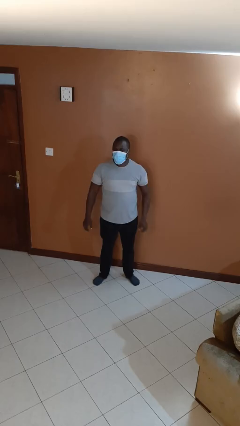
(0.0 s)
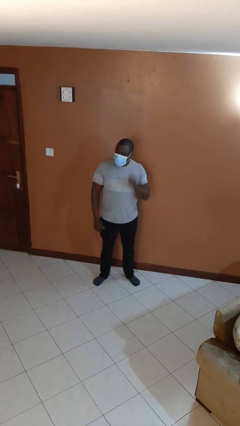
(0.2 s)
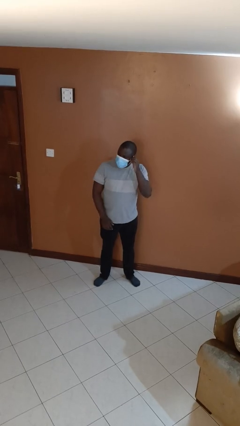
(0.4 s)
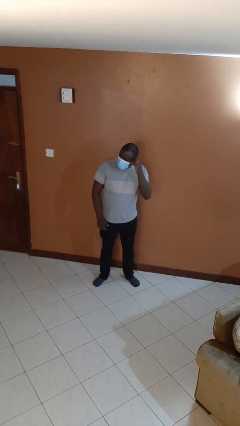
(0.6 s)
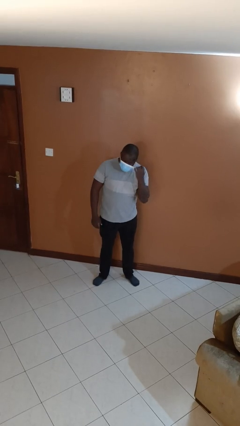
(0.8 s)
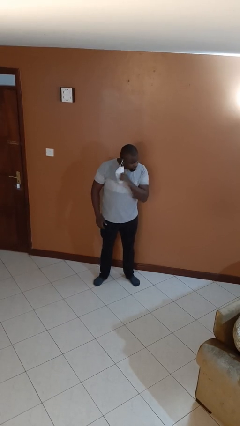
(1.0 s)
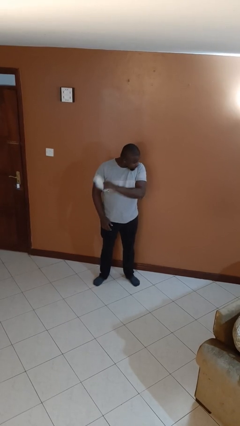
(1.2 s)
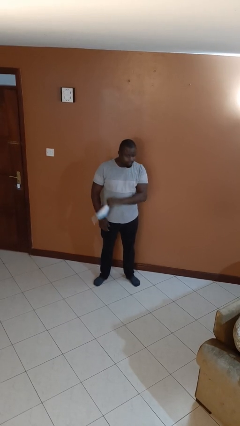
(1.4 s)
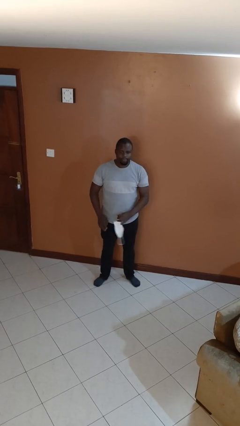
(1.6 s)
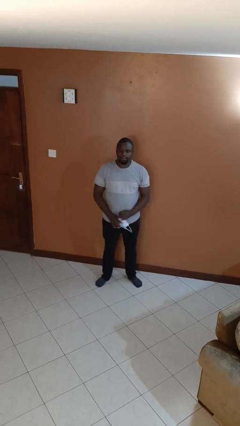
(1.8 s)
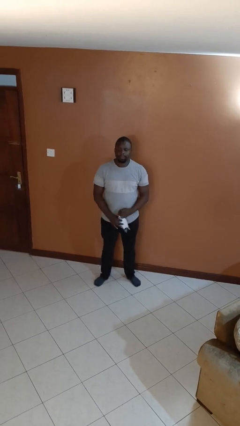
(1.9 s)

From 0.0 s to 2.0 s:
person takes off facemask

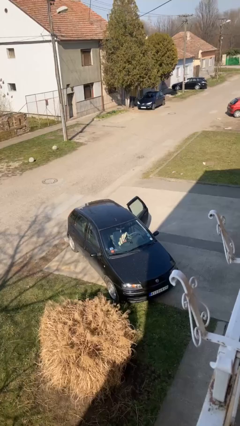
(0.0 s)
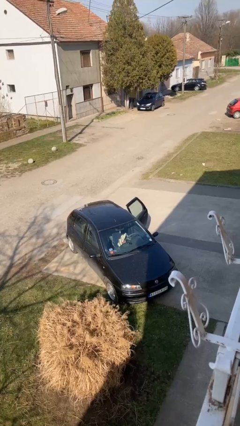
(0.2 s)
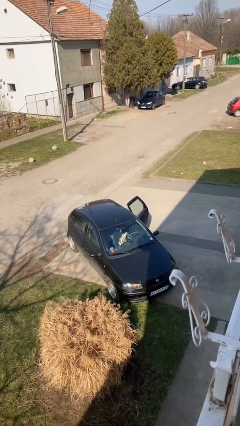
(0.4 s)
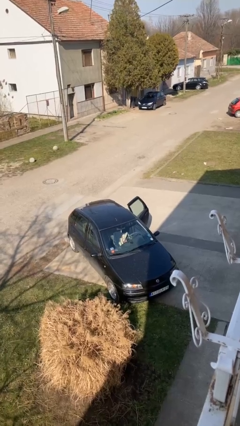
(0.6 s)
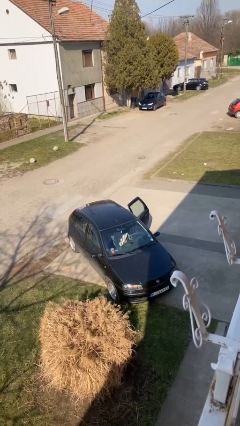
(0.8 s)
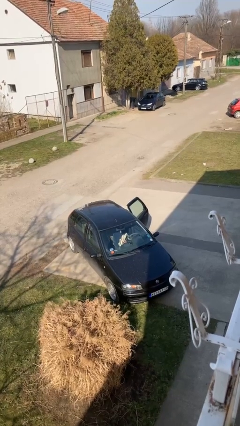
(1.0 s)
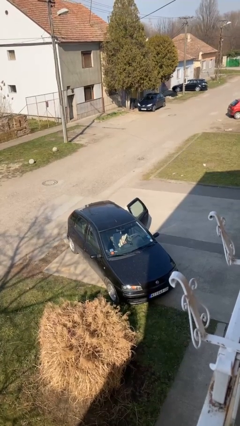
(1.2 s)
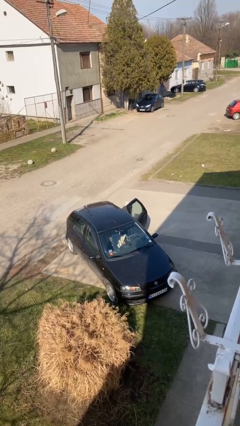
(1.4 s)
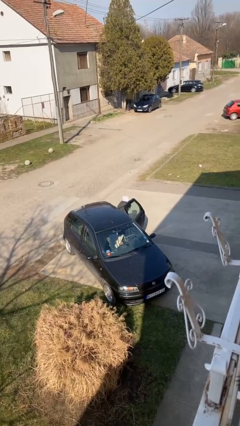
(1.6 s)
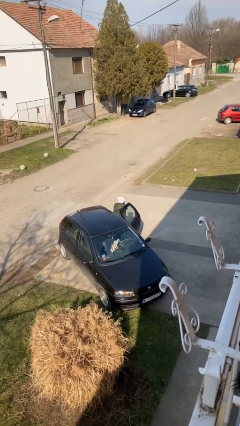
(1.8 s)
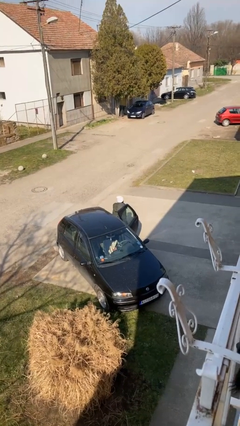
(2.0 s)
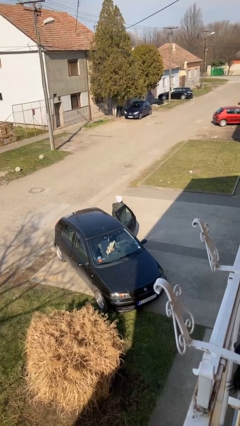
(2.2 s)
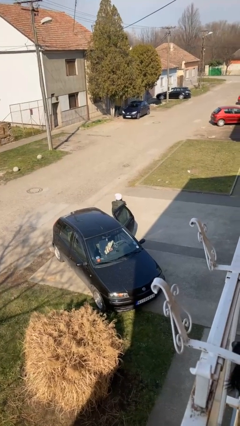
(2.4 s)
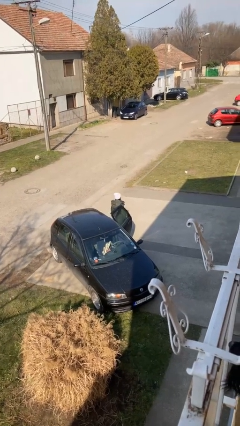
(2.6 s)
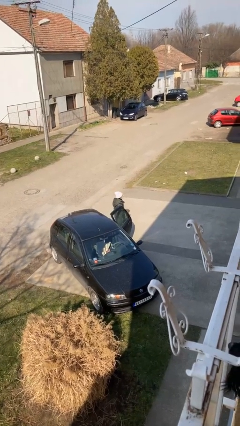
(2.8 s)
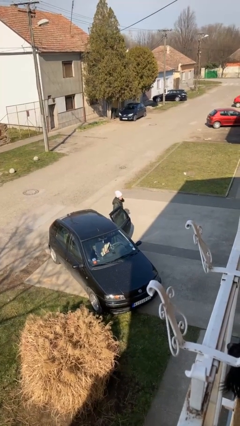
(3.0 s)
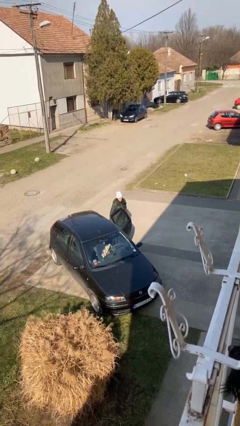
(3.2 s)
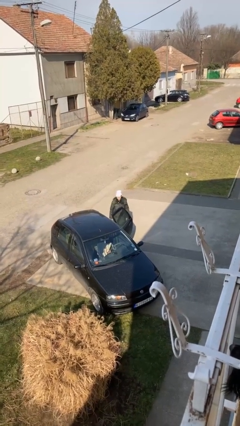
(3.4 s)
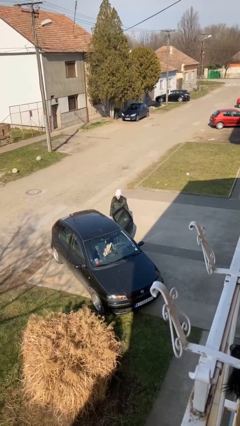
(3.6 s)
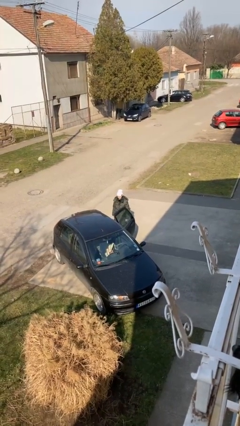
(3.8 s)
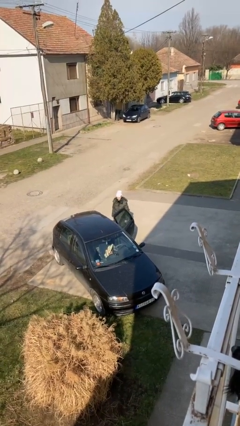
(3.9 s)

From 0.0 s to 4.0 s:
person exits car

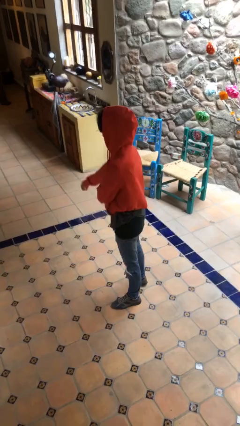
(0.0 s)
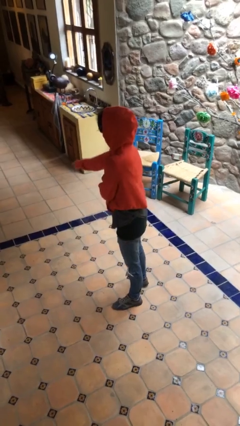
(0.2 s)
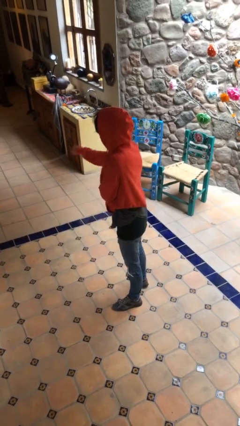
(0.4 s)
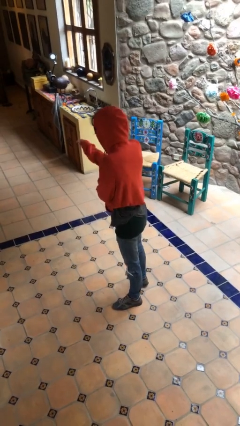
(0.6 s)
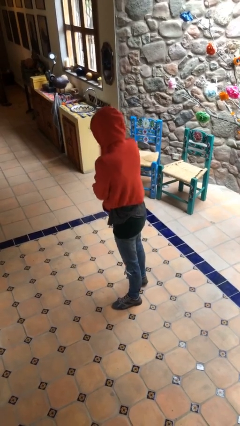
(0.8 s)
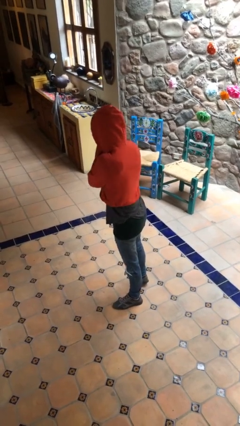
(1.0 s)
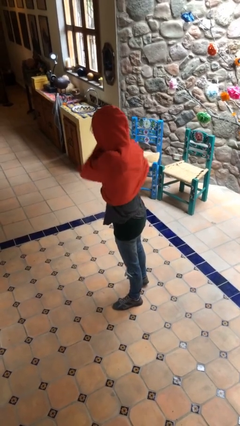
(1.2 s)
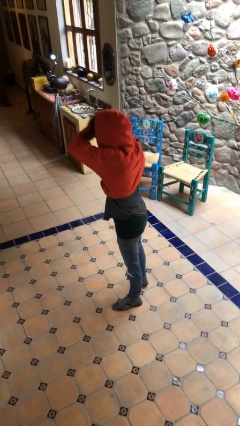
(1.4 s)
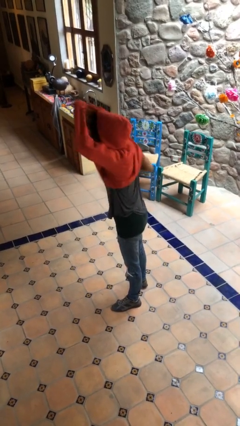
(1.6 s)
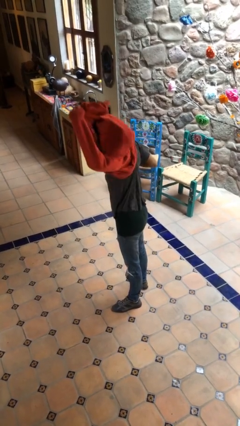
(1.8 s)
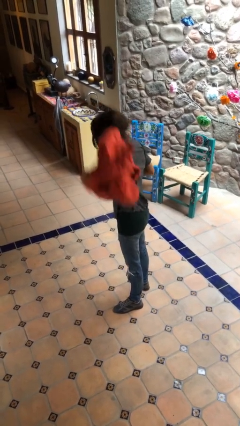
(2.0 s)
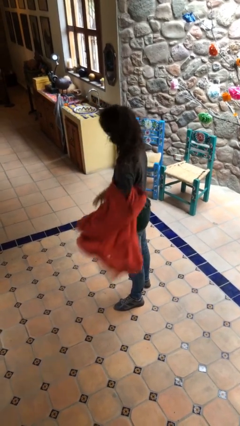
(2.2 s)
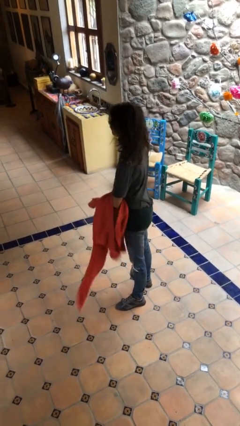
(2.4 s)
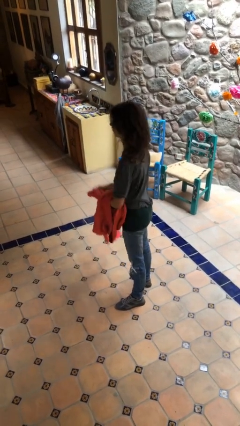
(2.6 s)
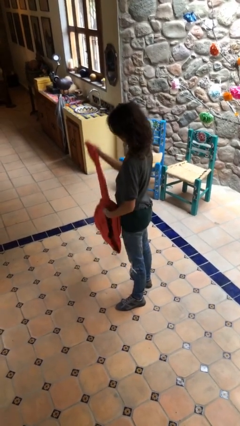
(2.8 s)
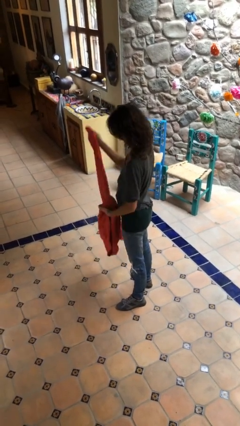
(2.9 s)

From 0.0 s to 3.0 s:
person takes off hoodie

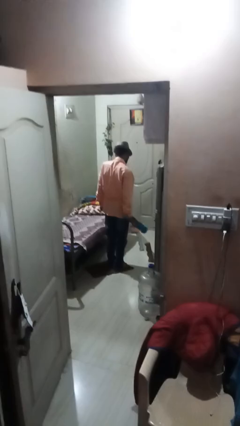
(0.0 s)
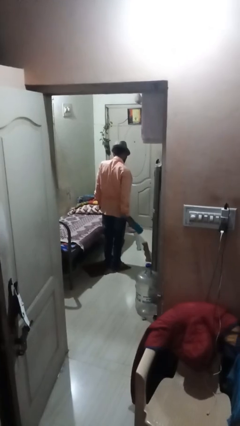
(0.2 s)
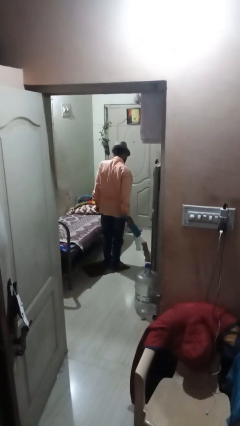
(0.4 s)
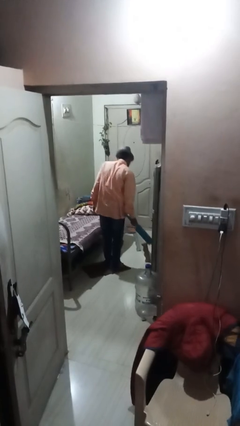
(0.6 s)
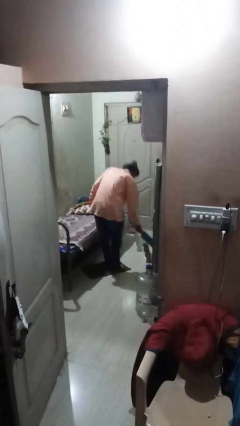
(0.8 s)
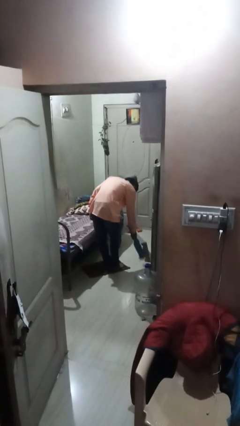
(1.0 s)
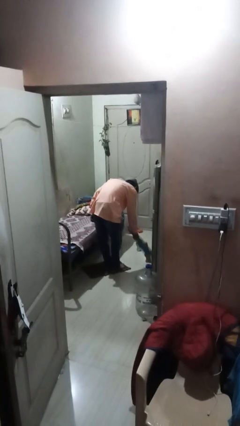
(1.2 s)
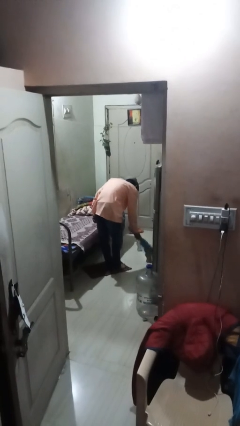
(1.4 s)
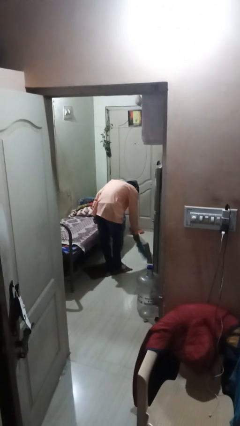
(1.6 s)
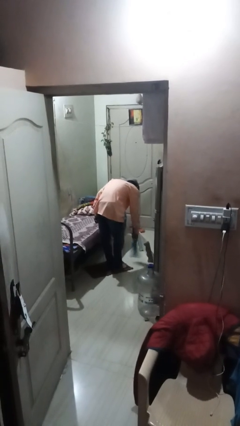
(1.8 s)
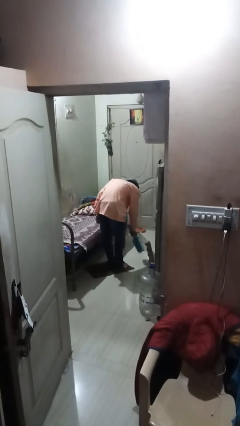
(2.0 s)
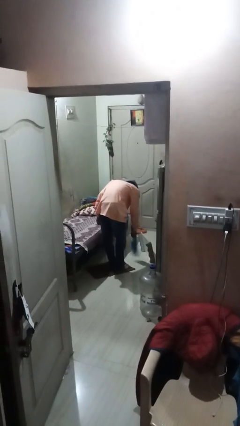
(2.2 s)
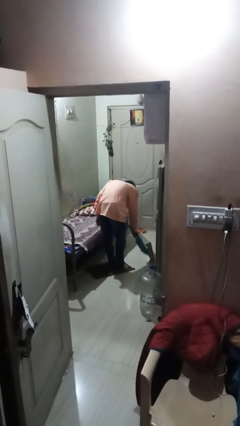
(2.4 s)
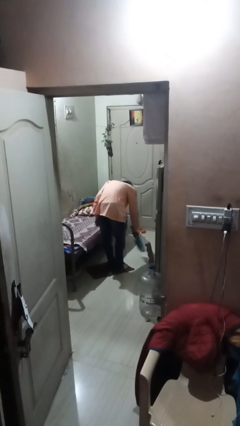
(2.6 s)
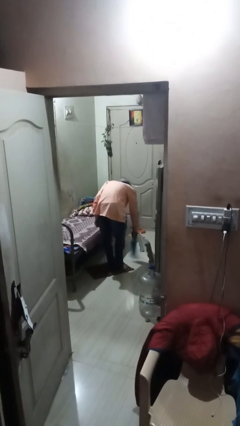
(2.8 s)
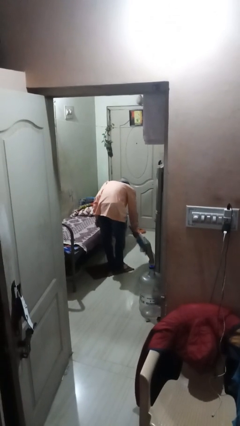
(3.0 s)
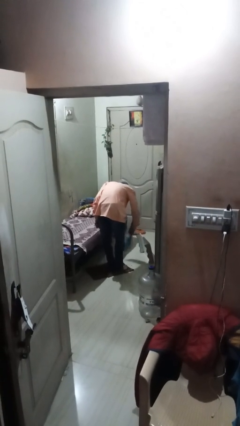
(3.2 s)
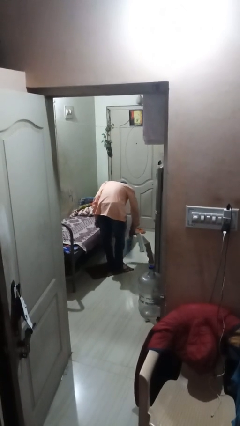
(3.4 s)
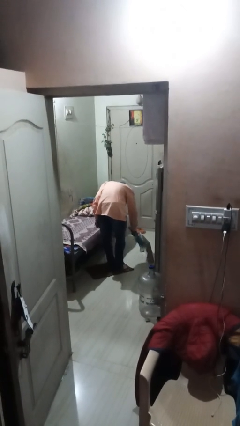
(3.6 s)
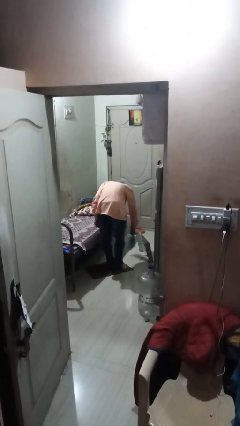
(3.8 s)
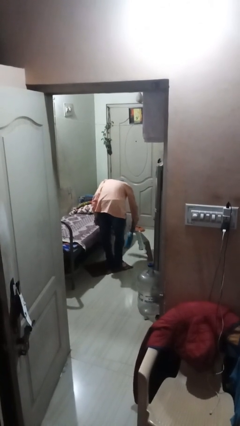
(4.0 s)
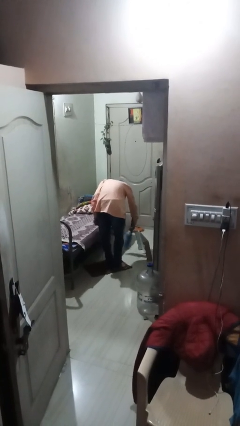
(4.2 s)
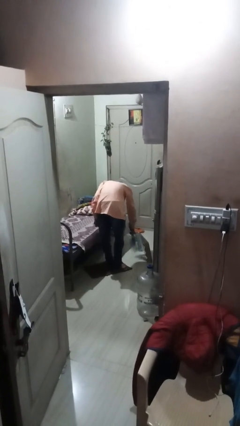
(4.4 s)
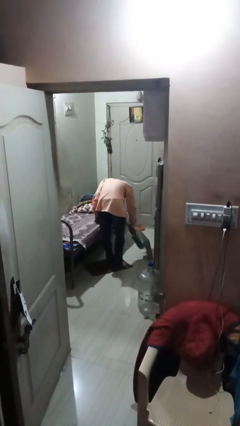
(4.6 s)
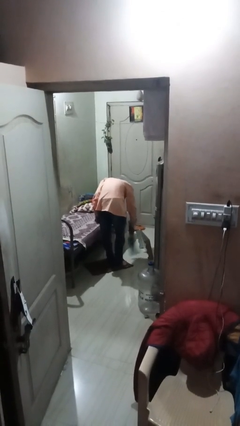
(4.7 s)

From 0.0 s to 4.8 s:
person dusts furniture

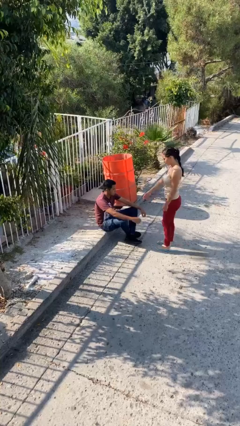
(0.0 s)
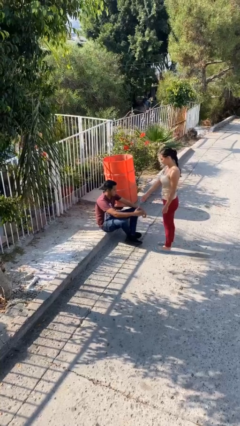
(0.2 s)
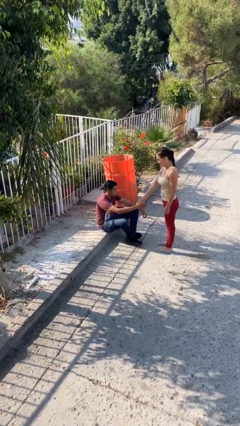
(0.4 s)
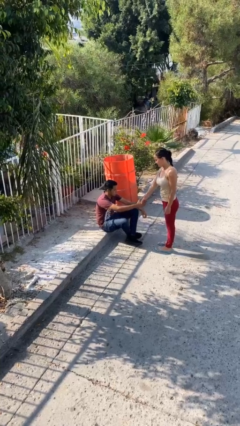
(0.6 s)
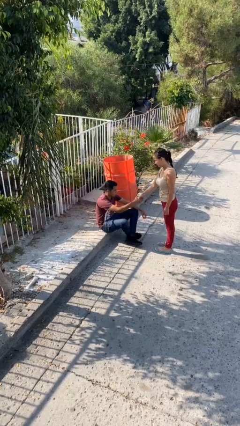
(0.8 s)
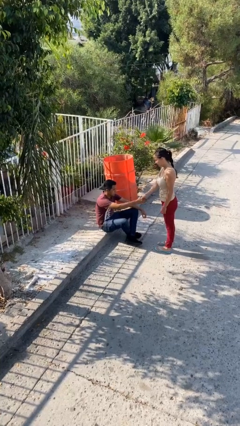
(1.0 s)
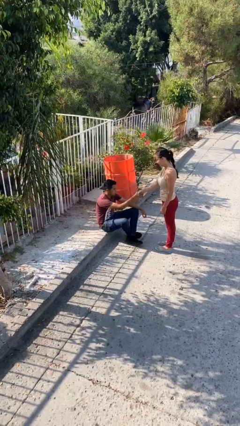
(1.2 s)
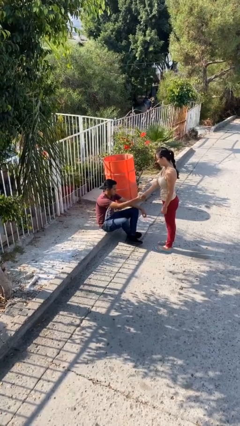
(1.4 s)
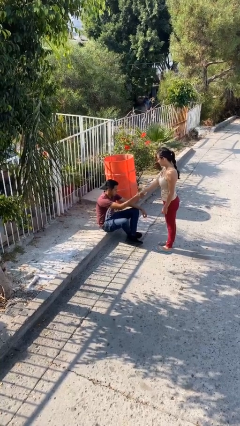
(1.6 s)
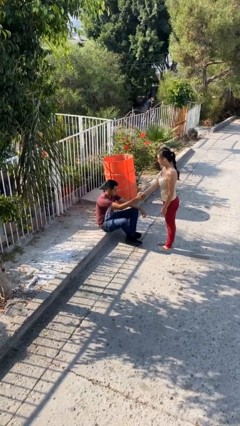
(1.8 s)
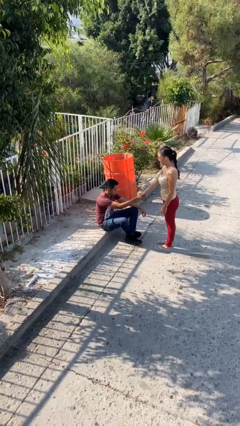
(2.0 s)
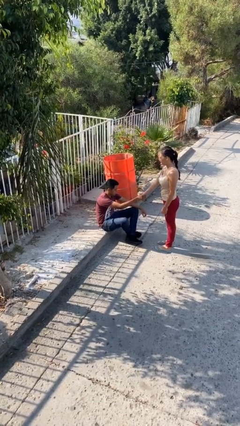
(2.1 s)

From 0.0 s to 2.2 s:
person shakes hand

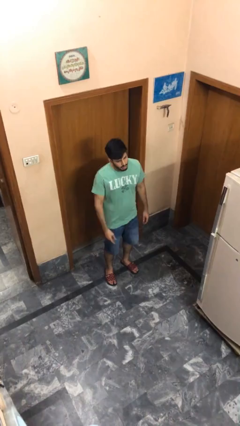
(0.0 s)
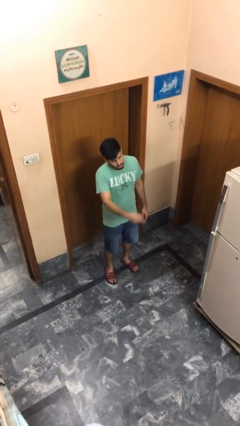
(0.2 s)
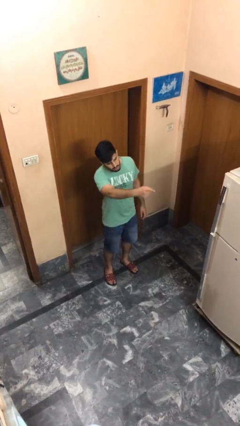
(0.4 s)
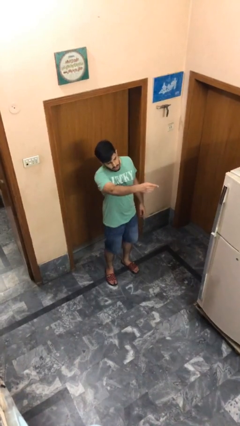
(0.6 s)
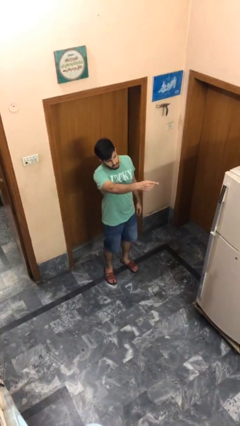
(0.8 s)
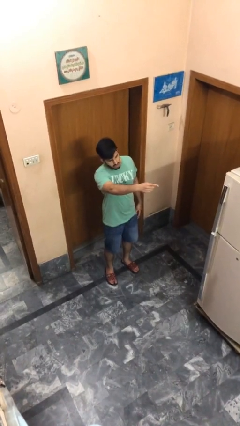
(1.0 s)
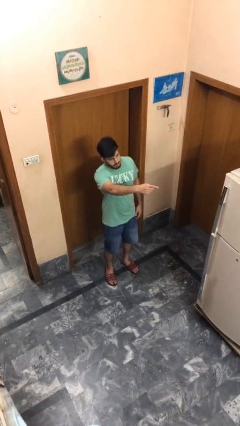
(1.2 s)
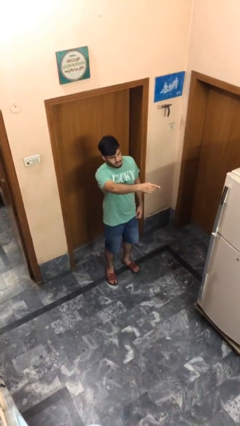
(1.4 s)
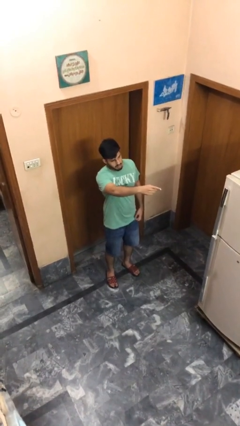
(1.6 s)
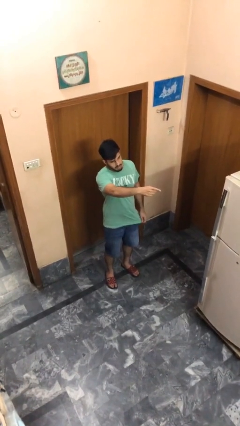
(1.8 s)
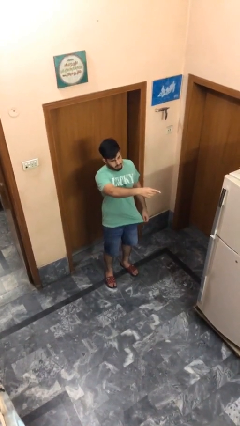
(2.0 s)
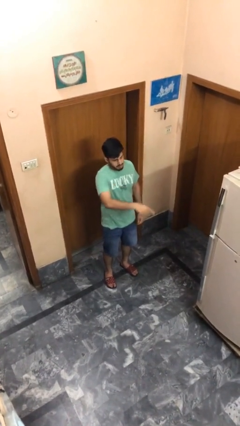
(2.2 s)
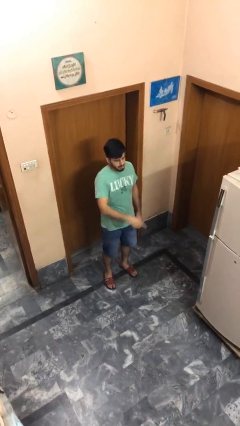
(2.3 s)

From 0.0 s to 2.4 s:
person points at person
